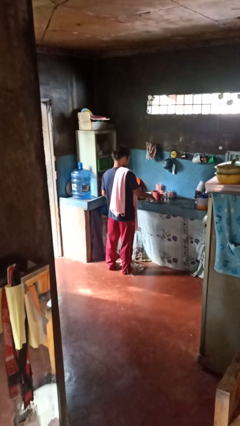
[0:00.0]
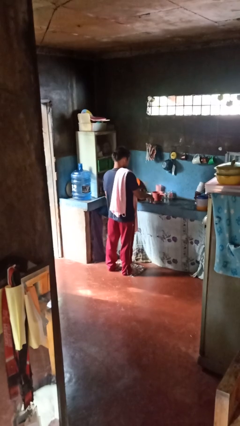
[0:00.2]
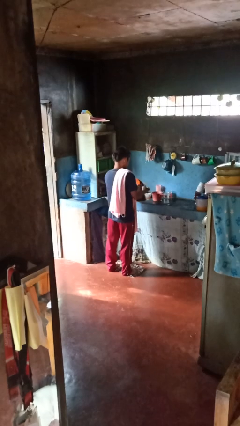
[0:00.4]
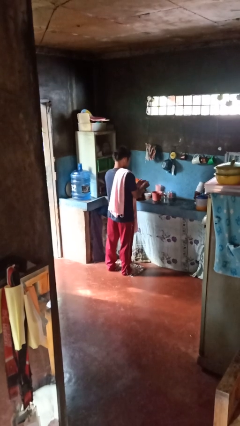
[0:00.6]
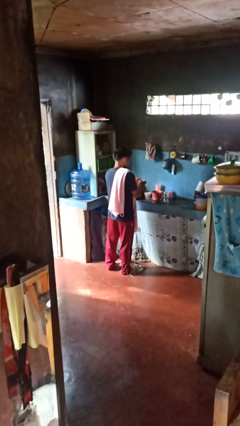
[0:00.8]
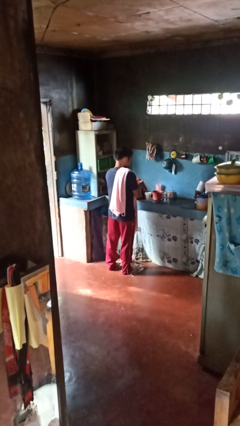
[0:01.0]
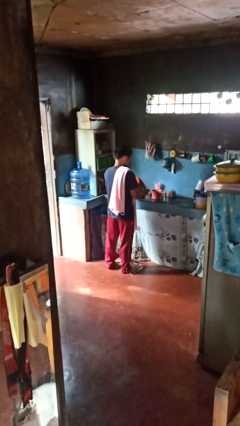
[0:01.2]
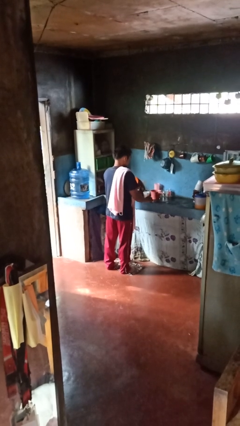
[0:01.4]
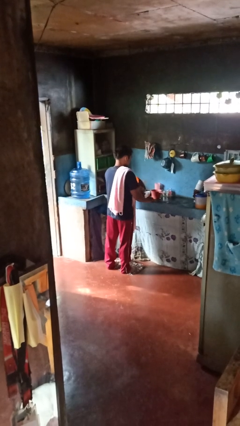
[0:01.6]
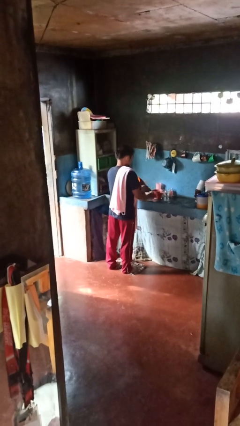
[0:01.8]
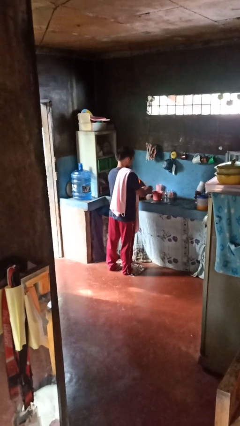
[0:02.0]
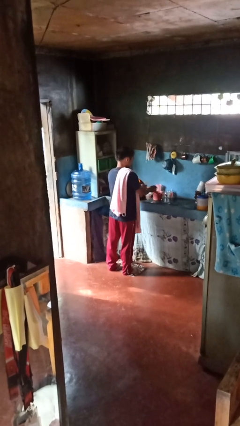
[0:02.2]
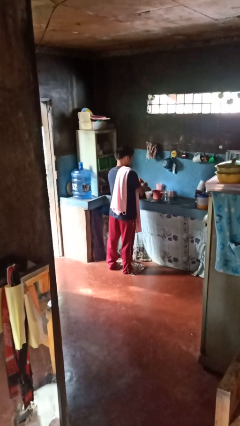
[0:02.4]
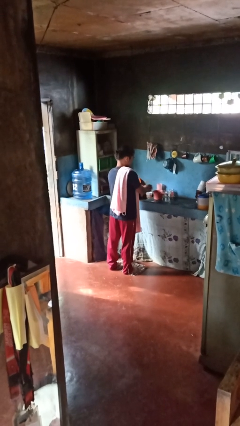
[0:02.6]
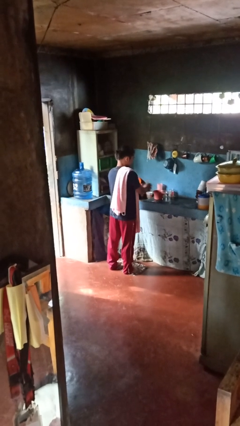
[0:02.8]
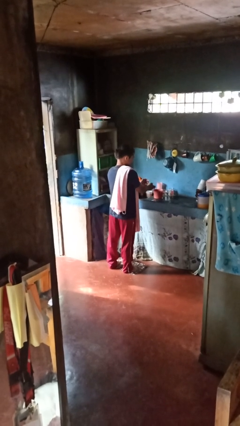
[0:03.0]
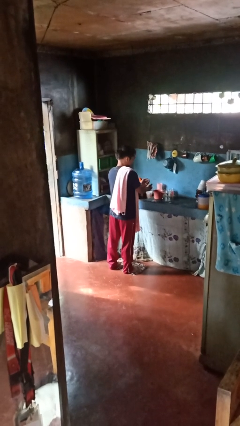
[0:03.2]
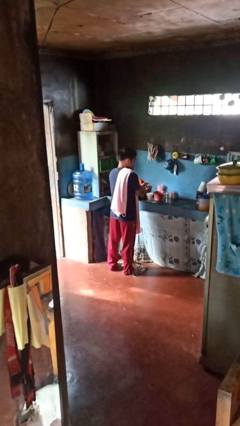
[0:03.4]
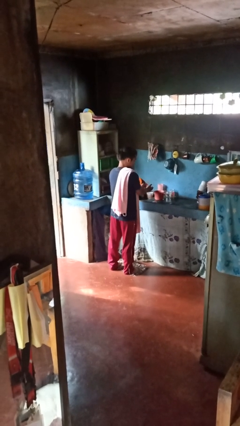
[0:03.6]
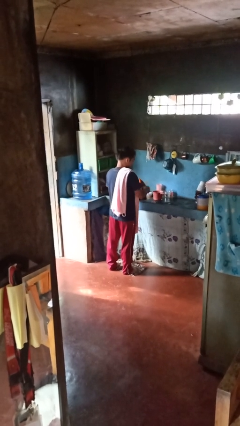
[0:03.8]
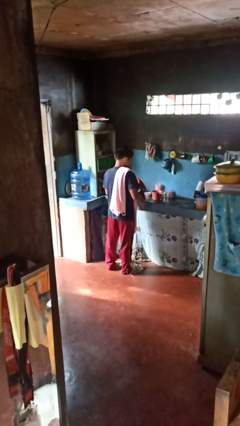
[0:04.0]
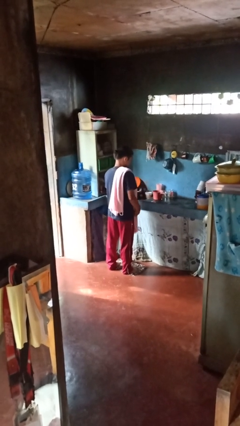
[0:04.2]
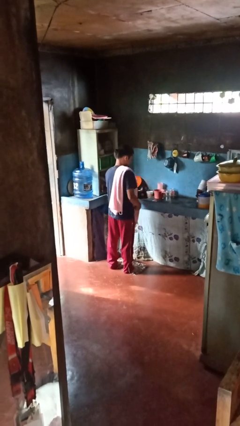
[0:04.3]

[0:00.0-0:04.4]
person washes hands

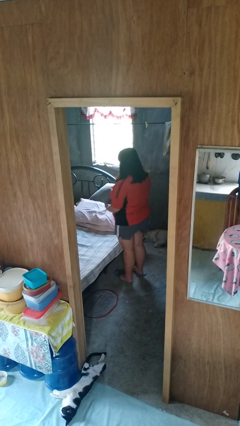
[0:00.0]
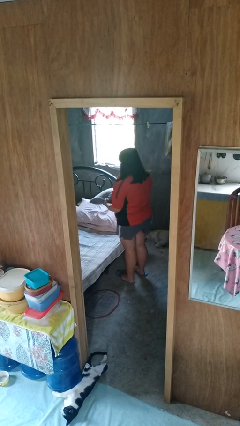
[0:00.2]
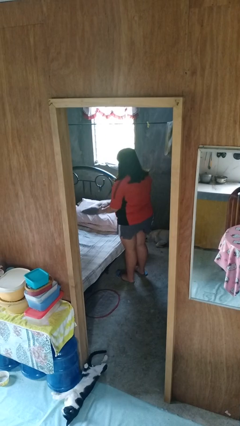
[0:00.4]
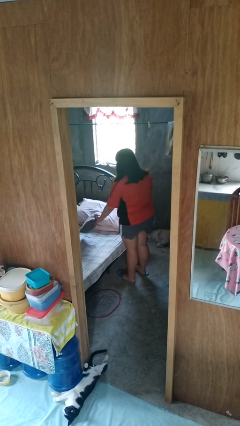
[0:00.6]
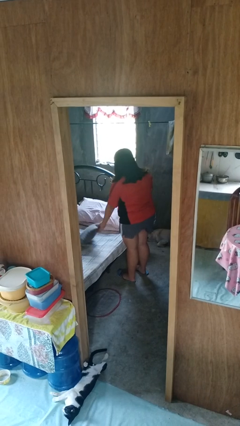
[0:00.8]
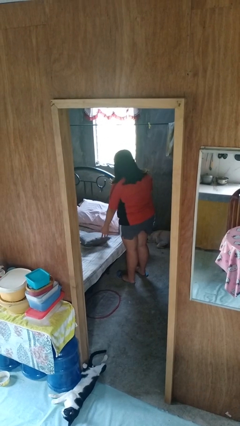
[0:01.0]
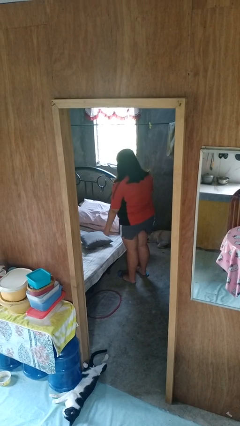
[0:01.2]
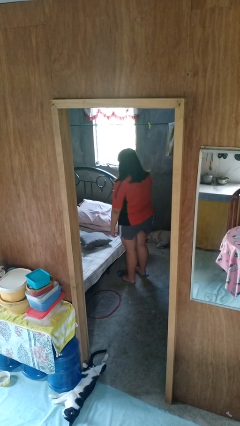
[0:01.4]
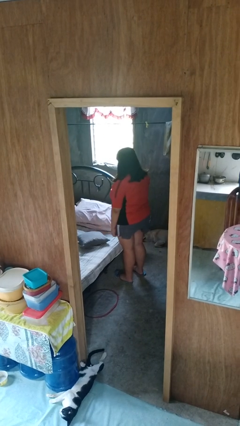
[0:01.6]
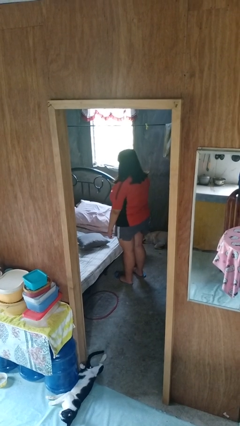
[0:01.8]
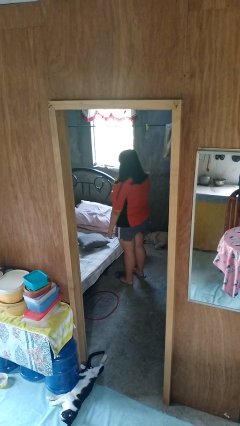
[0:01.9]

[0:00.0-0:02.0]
person puts down object on bed

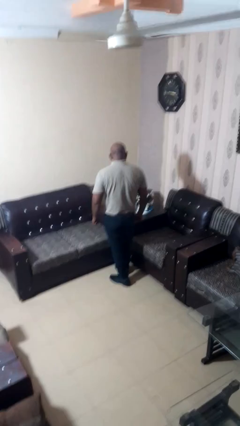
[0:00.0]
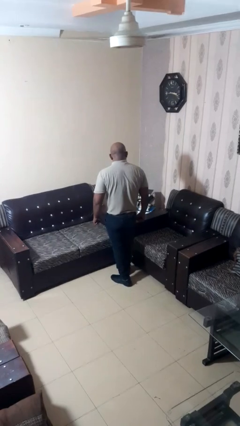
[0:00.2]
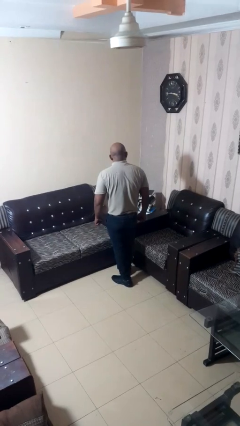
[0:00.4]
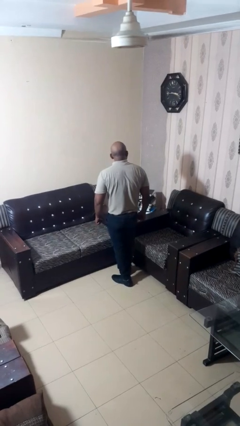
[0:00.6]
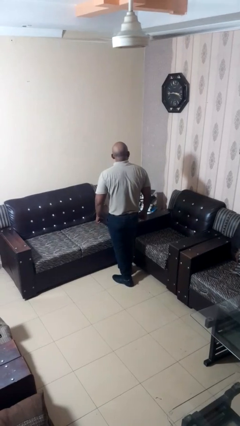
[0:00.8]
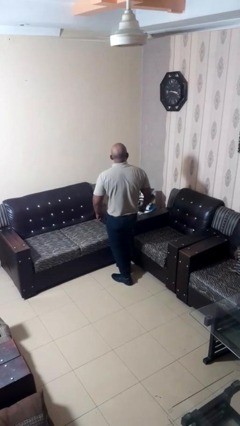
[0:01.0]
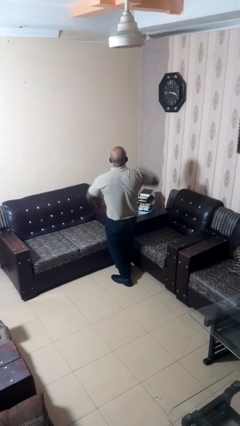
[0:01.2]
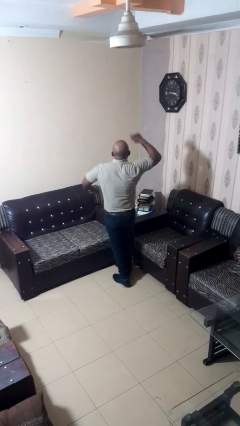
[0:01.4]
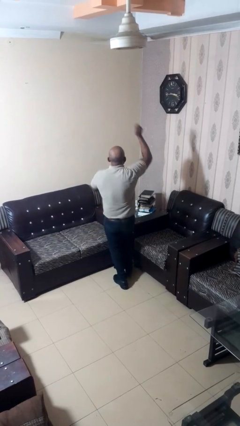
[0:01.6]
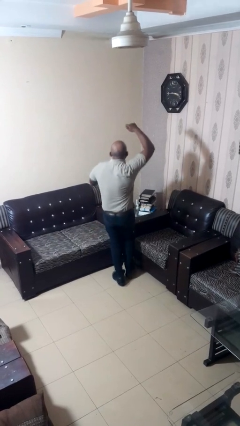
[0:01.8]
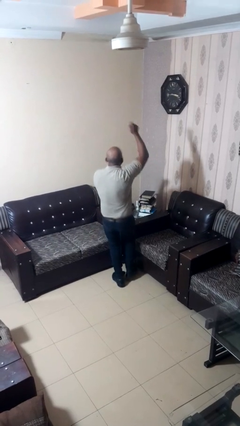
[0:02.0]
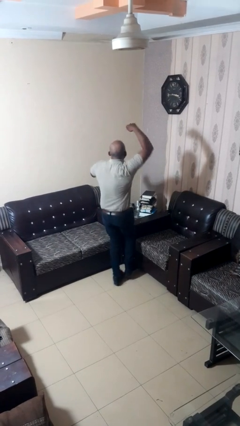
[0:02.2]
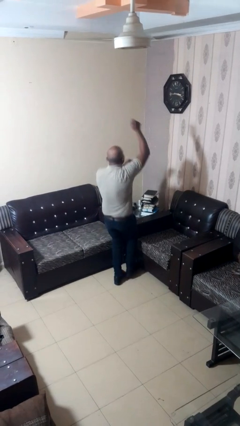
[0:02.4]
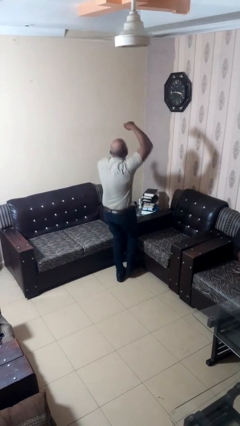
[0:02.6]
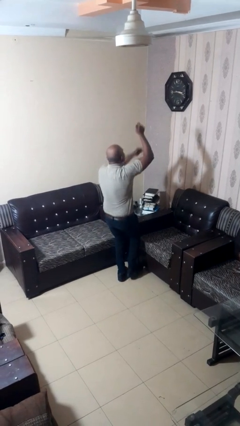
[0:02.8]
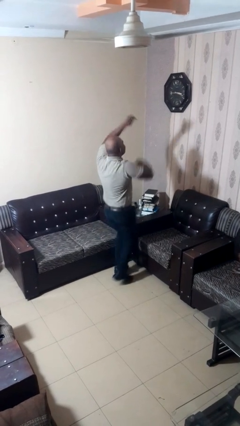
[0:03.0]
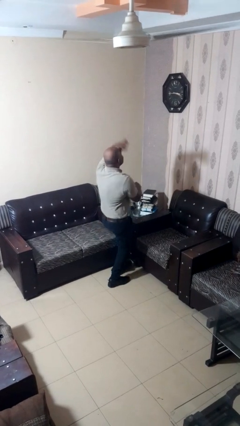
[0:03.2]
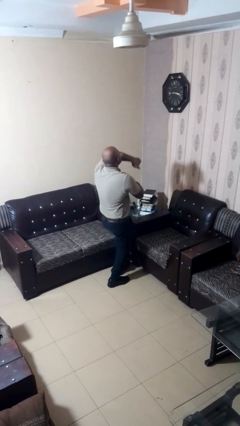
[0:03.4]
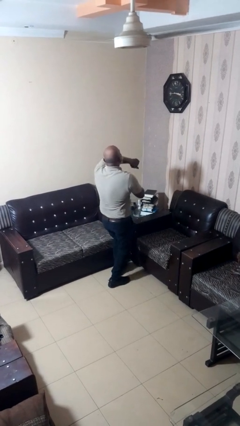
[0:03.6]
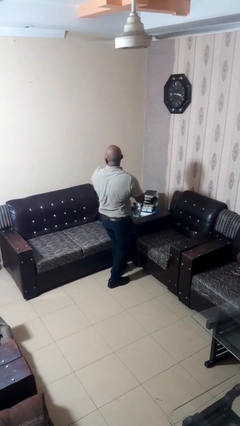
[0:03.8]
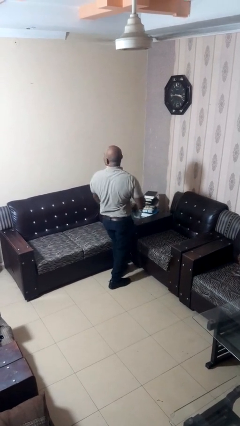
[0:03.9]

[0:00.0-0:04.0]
person dances in place

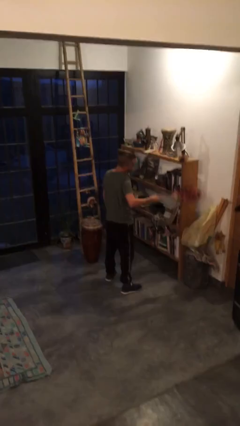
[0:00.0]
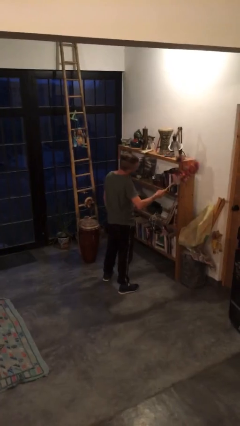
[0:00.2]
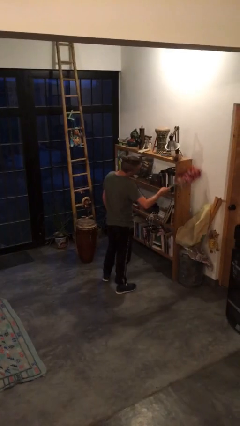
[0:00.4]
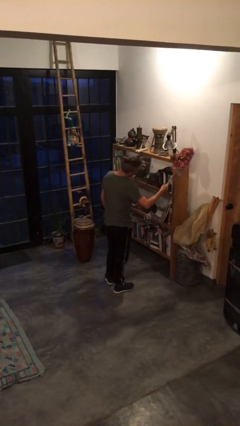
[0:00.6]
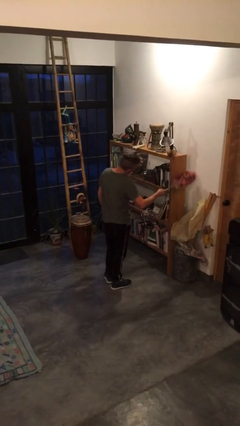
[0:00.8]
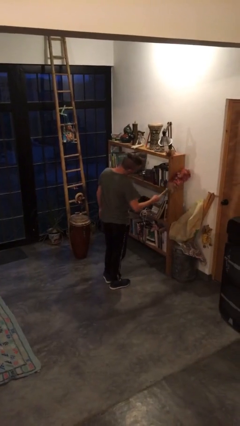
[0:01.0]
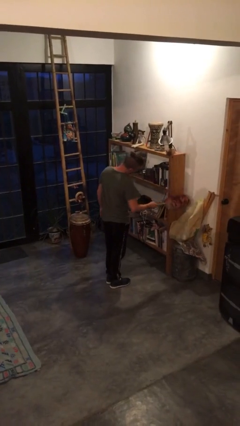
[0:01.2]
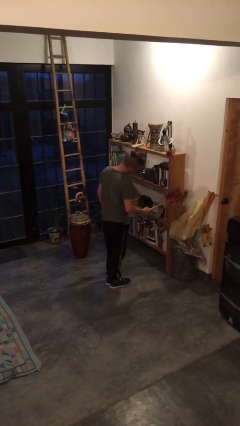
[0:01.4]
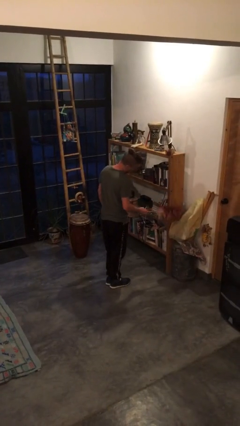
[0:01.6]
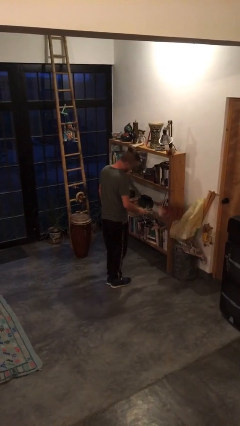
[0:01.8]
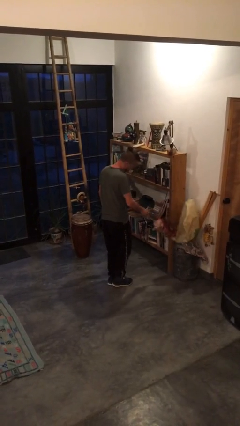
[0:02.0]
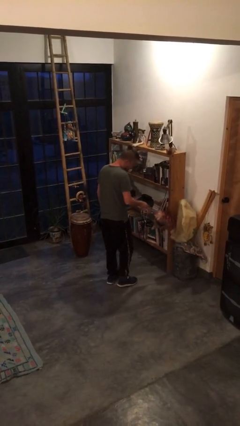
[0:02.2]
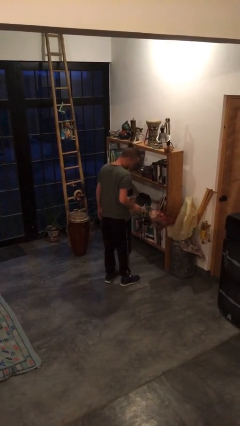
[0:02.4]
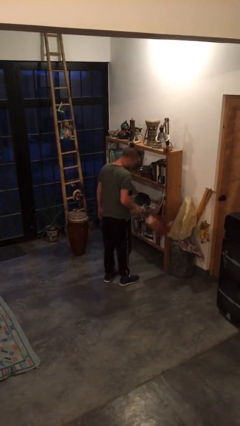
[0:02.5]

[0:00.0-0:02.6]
person dusts furniture

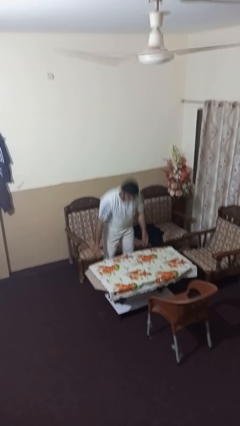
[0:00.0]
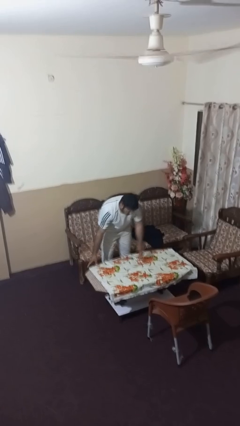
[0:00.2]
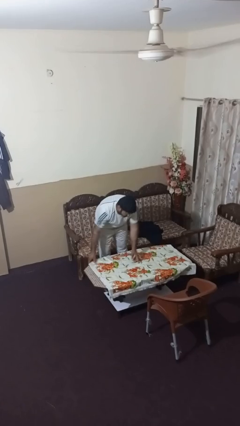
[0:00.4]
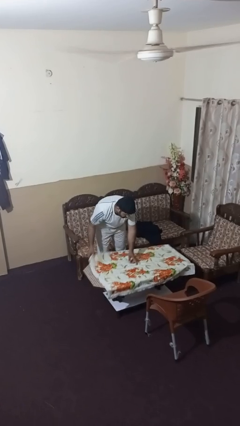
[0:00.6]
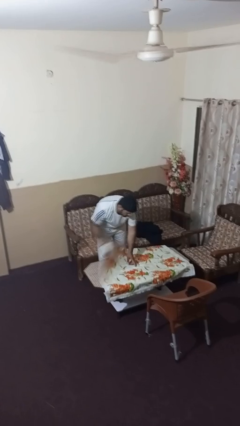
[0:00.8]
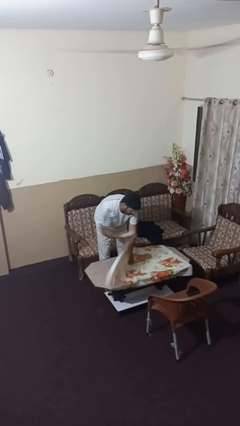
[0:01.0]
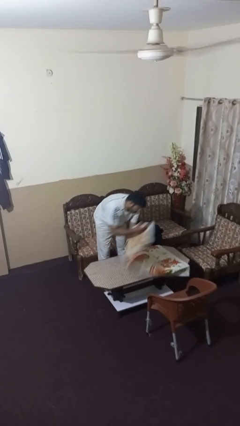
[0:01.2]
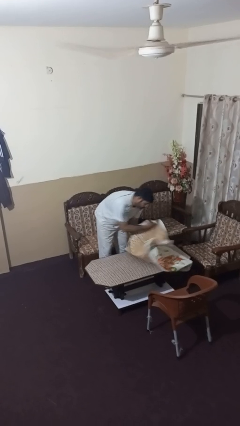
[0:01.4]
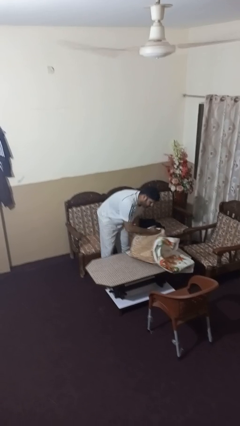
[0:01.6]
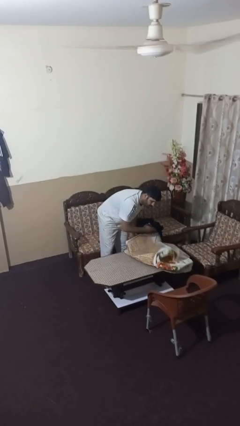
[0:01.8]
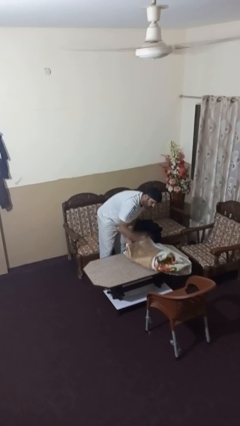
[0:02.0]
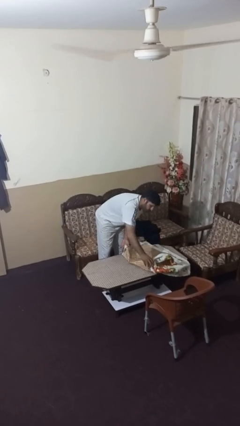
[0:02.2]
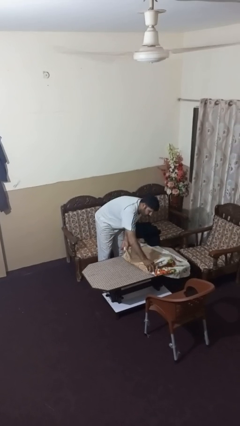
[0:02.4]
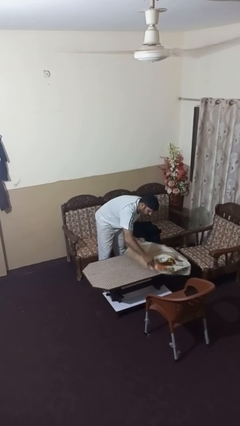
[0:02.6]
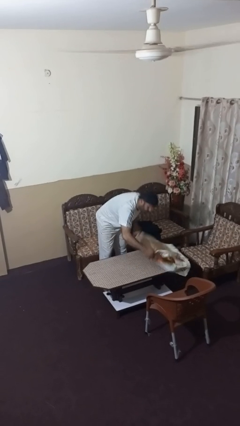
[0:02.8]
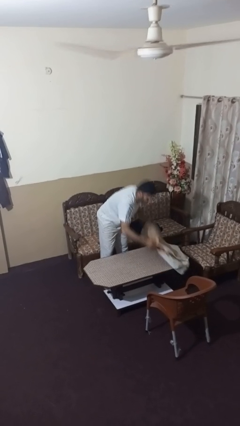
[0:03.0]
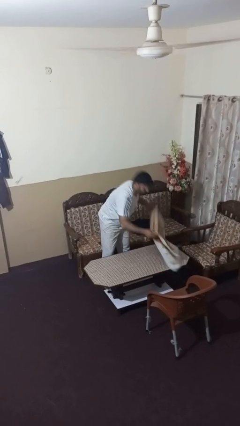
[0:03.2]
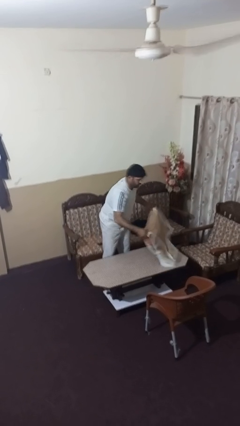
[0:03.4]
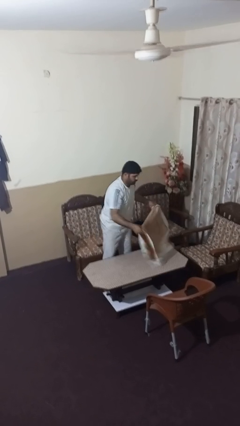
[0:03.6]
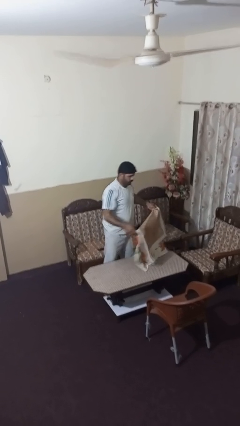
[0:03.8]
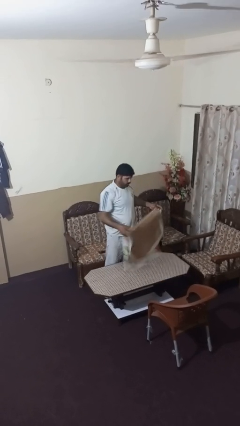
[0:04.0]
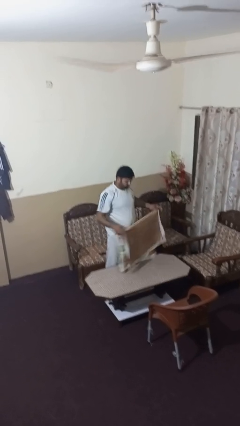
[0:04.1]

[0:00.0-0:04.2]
person folds tablecloth

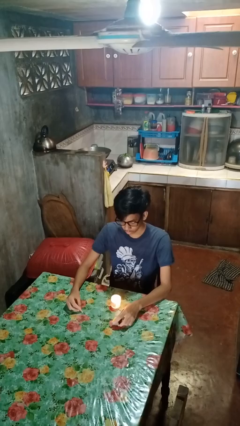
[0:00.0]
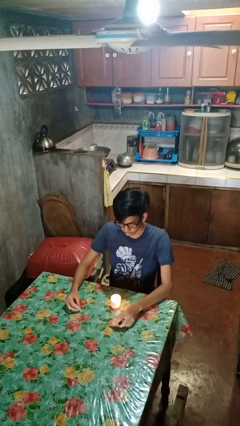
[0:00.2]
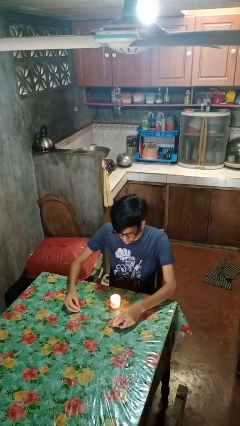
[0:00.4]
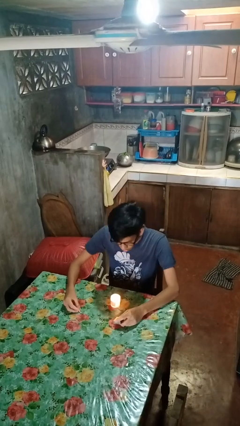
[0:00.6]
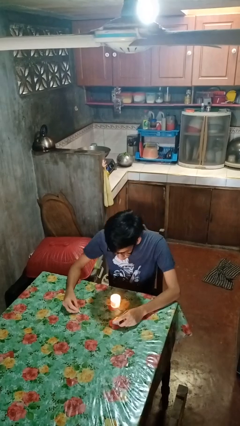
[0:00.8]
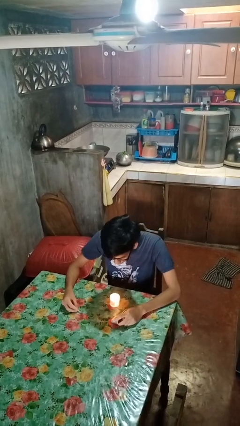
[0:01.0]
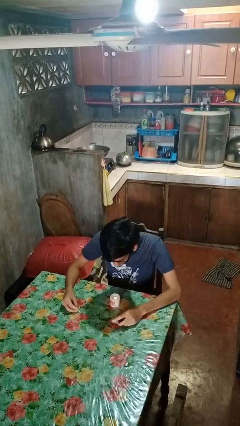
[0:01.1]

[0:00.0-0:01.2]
person extinguishes candle
